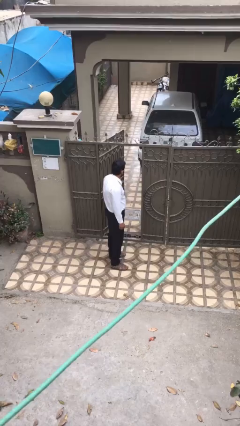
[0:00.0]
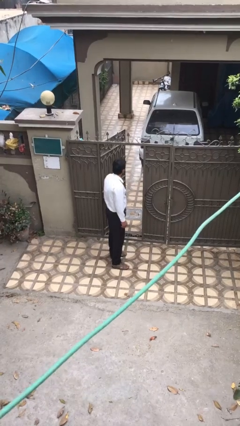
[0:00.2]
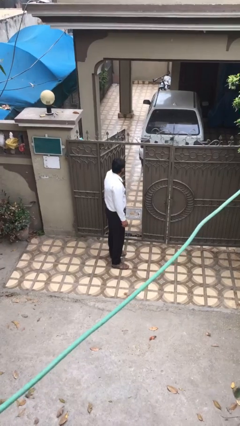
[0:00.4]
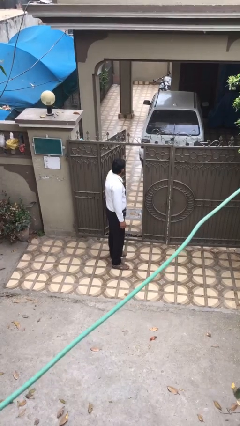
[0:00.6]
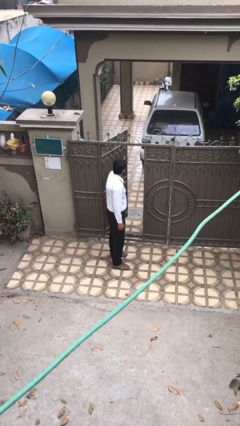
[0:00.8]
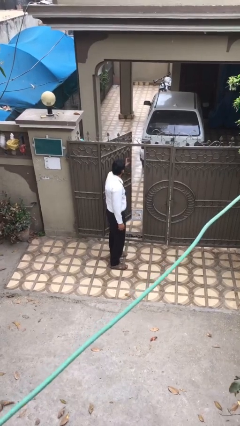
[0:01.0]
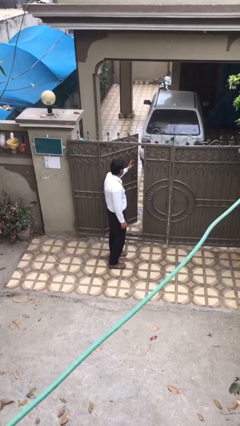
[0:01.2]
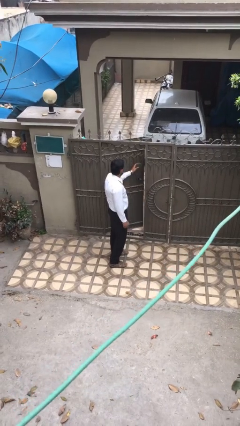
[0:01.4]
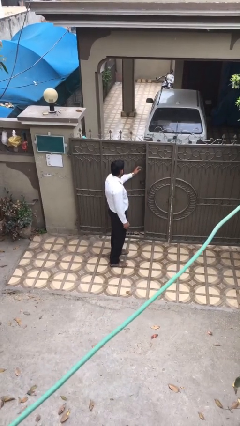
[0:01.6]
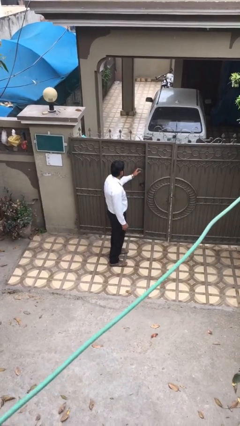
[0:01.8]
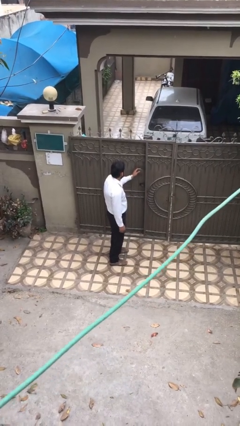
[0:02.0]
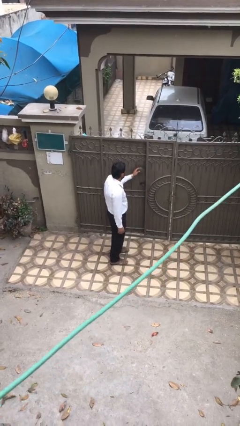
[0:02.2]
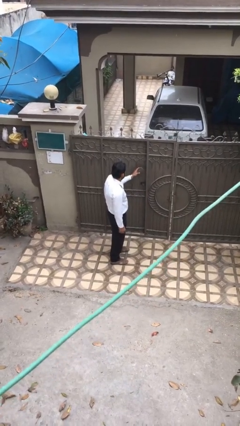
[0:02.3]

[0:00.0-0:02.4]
person closes facility door

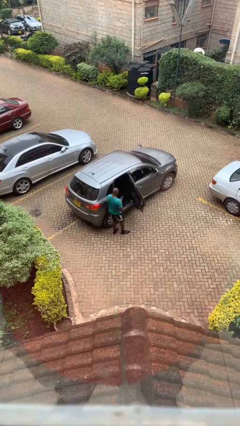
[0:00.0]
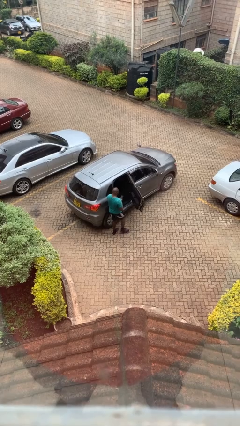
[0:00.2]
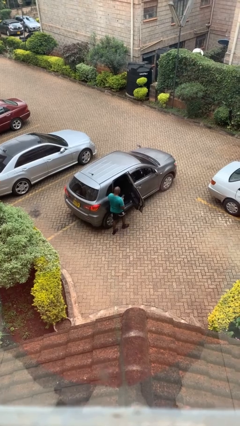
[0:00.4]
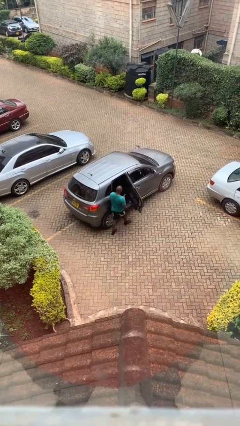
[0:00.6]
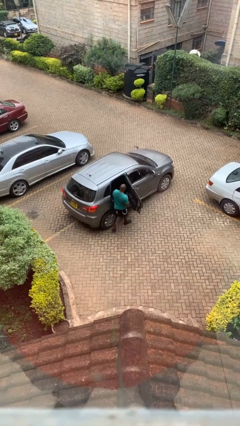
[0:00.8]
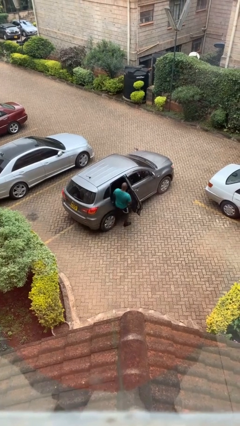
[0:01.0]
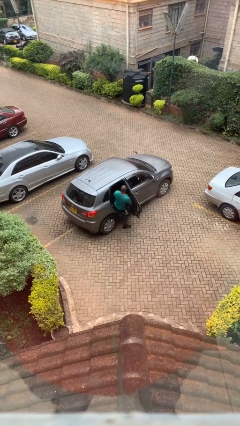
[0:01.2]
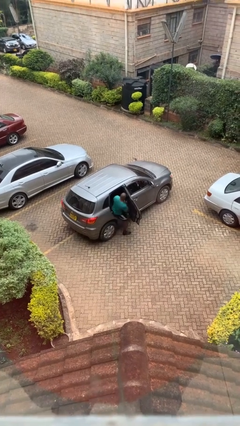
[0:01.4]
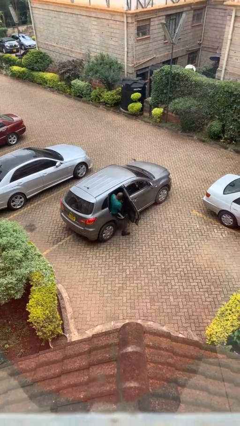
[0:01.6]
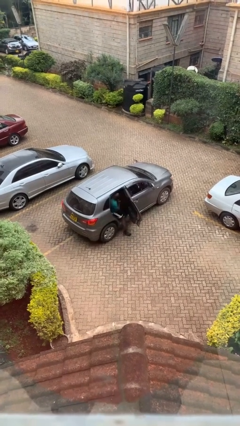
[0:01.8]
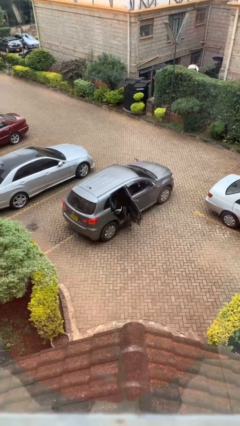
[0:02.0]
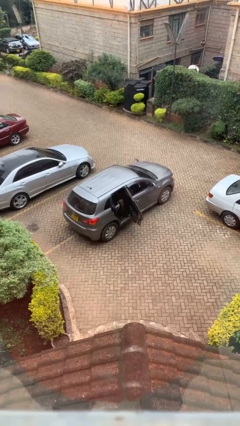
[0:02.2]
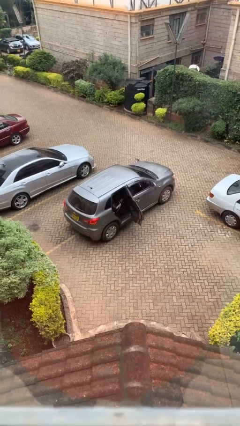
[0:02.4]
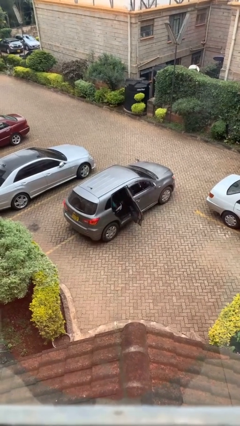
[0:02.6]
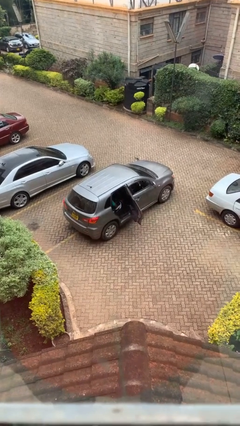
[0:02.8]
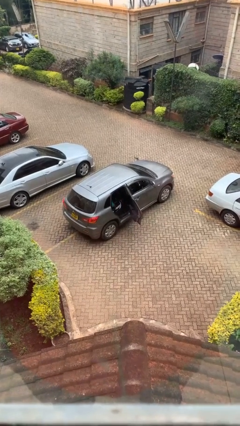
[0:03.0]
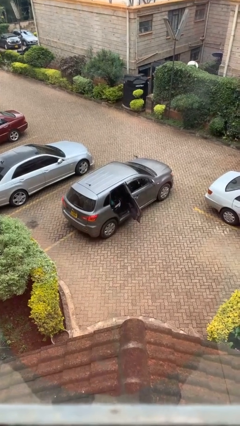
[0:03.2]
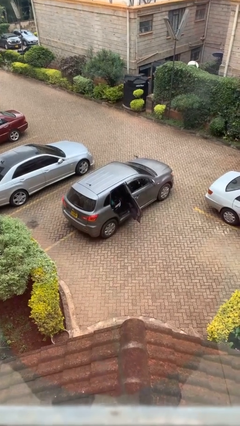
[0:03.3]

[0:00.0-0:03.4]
person enters car

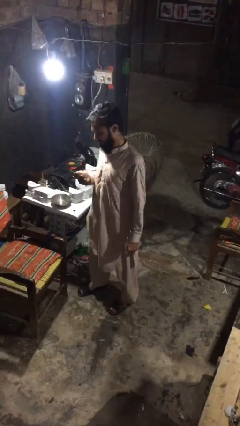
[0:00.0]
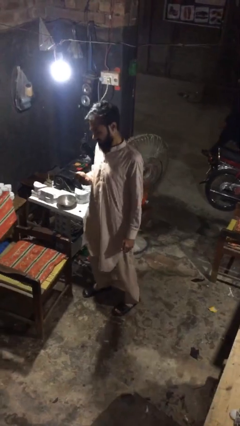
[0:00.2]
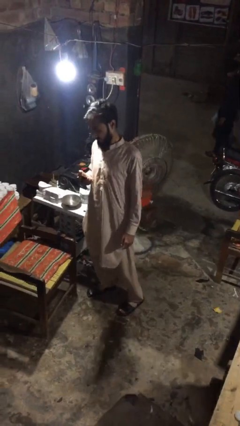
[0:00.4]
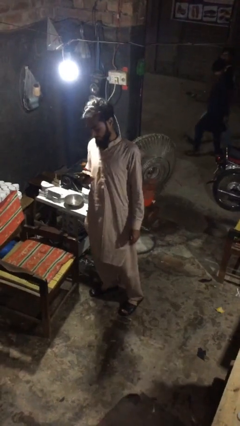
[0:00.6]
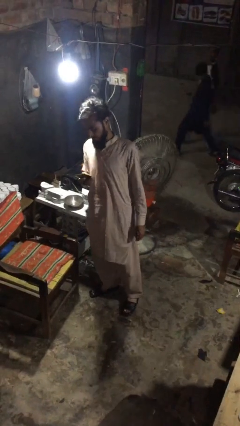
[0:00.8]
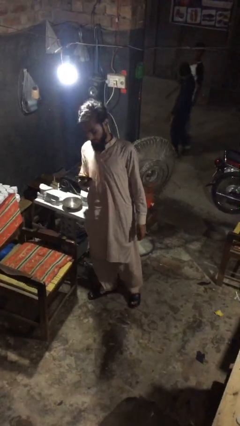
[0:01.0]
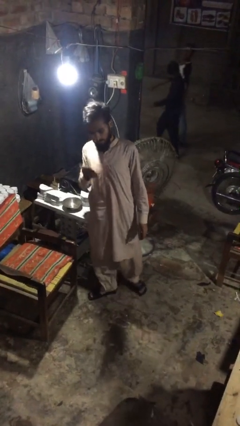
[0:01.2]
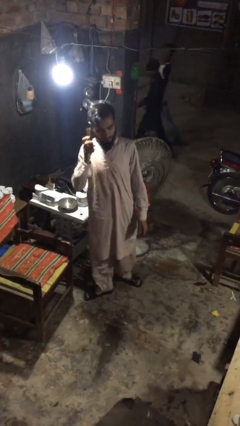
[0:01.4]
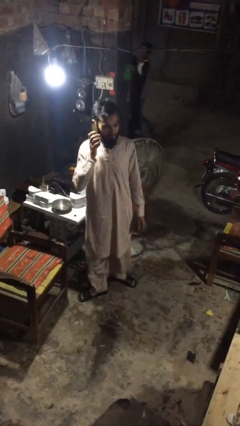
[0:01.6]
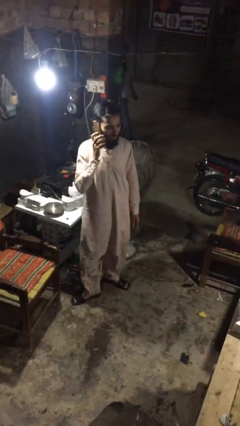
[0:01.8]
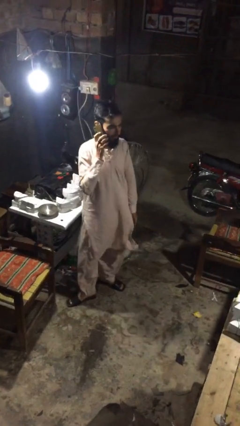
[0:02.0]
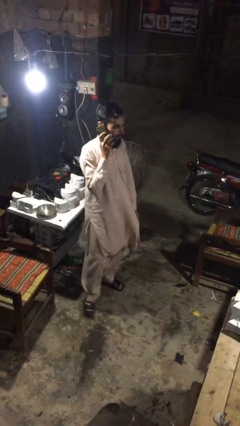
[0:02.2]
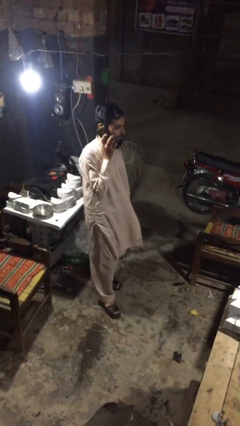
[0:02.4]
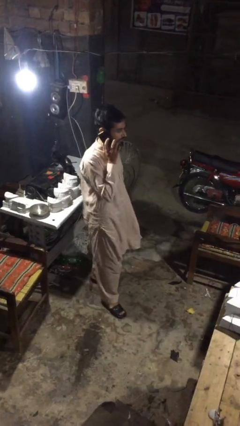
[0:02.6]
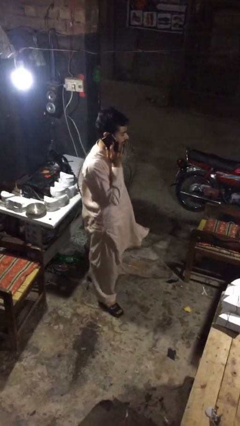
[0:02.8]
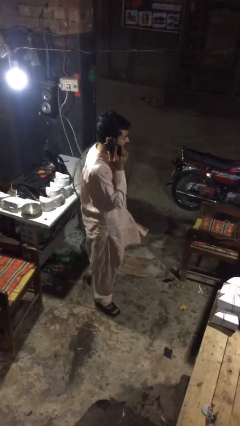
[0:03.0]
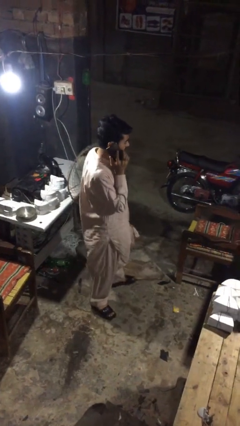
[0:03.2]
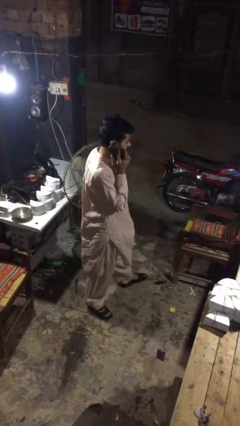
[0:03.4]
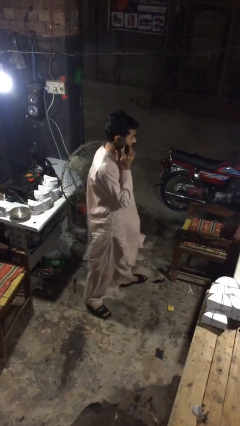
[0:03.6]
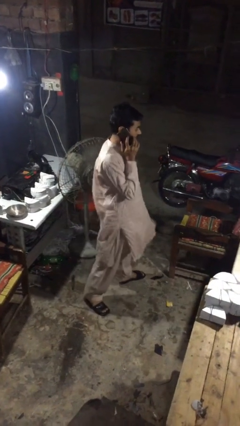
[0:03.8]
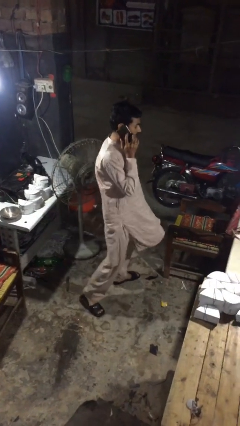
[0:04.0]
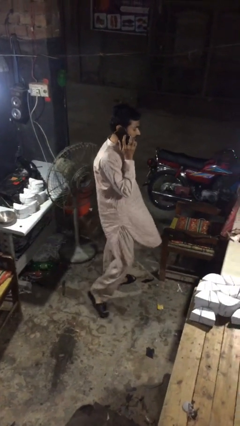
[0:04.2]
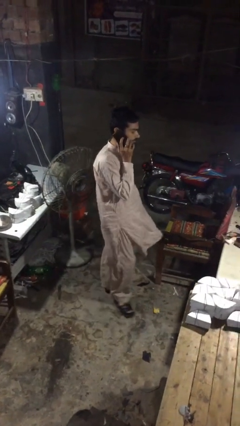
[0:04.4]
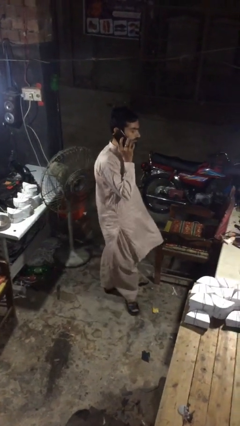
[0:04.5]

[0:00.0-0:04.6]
person talks on phone

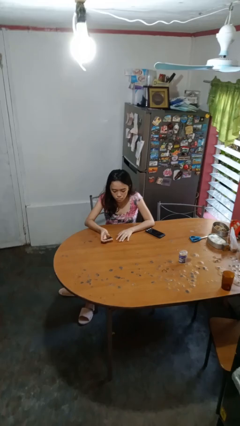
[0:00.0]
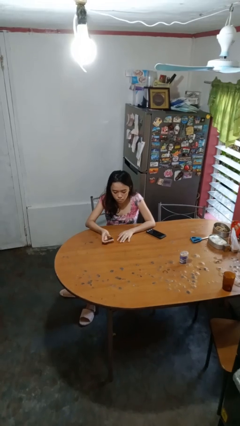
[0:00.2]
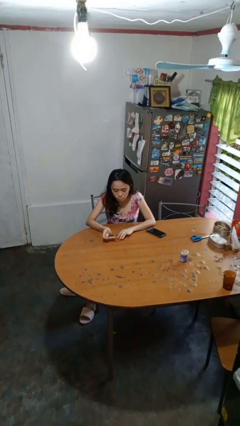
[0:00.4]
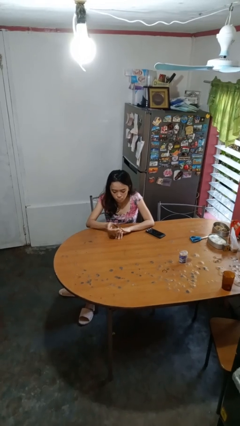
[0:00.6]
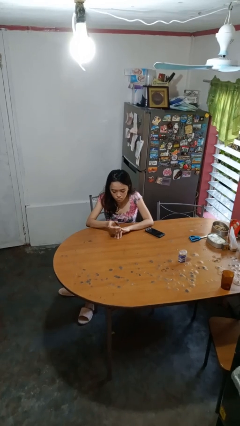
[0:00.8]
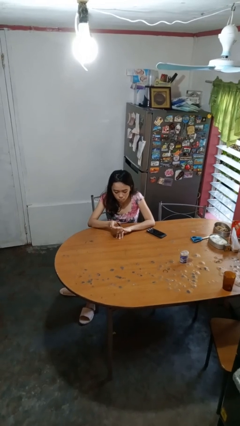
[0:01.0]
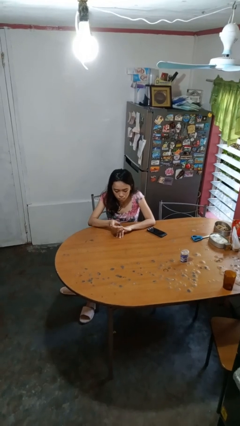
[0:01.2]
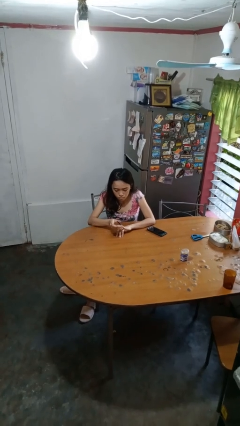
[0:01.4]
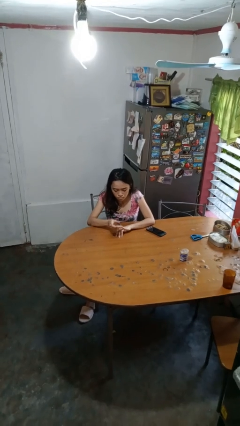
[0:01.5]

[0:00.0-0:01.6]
person clips fingernails

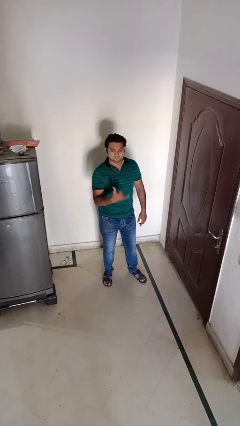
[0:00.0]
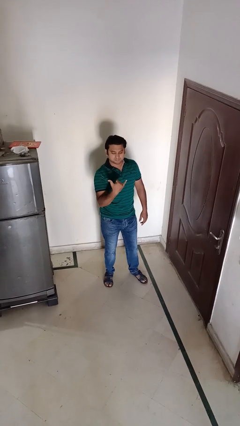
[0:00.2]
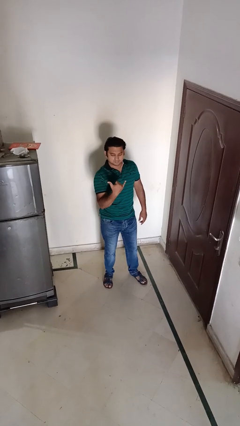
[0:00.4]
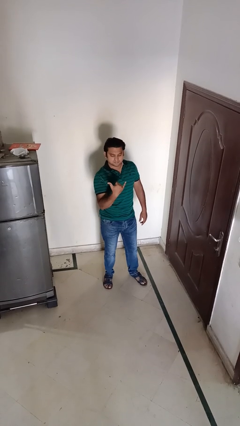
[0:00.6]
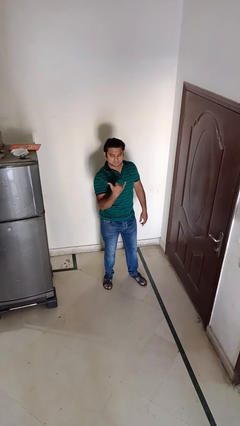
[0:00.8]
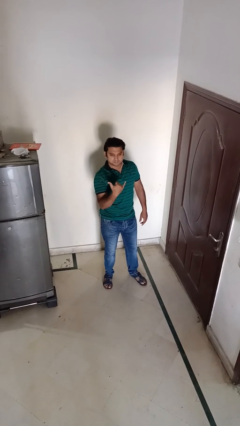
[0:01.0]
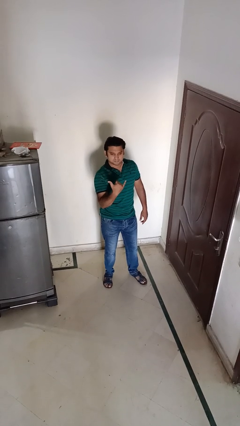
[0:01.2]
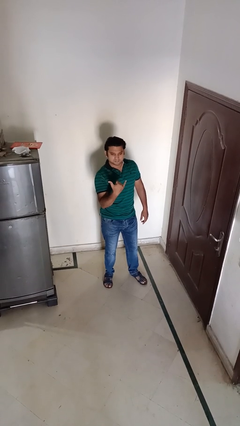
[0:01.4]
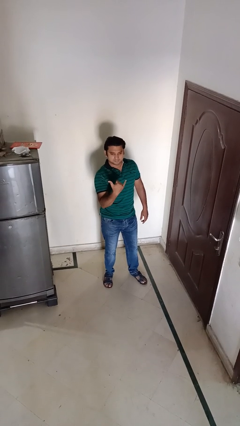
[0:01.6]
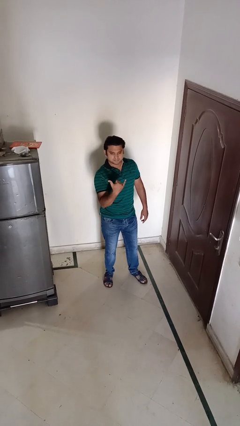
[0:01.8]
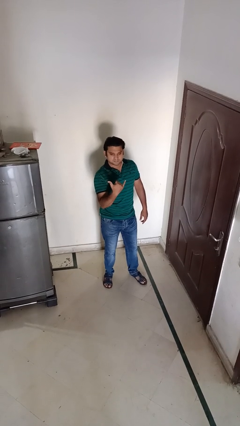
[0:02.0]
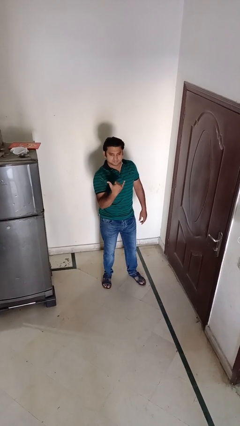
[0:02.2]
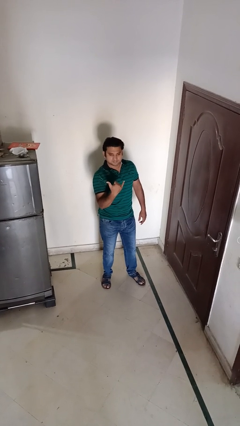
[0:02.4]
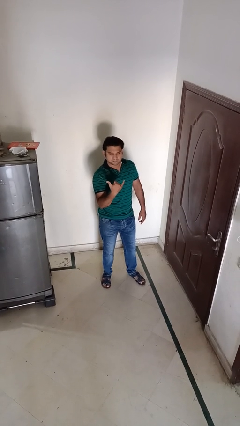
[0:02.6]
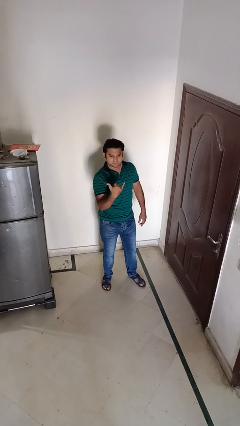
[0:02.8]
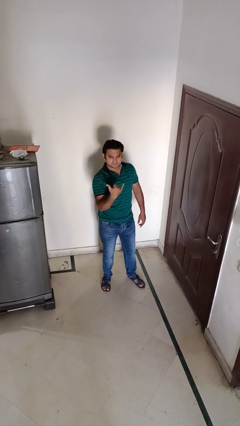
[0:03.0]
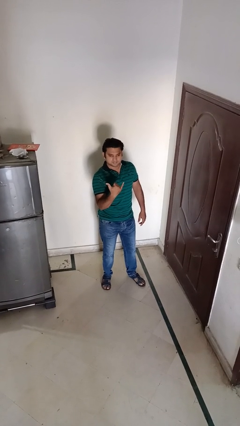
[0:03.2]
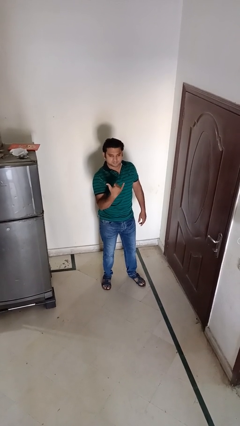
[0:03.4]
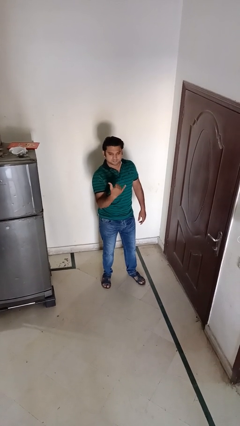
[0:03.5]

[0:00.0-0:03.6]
person gestures hang loose

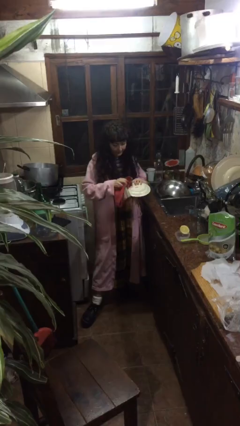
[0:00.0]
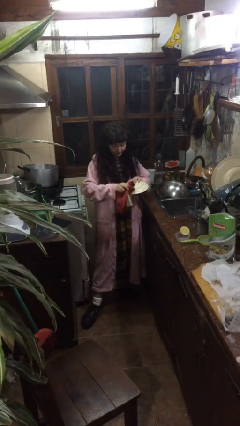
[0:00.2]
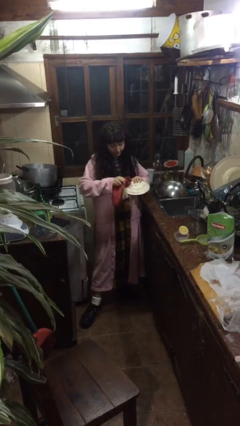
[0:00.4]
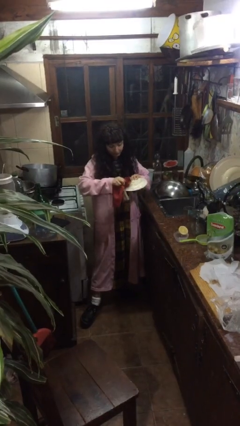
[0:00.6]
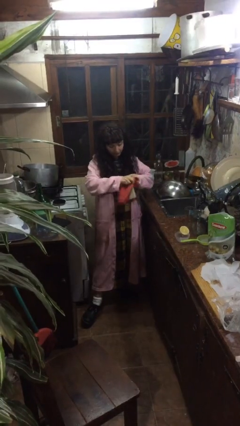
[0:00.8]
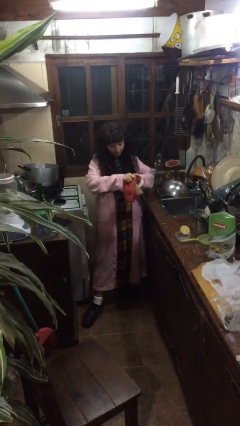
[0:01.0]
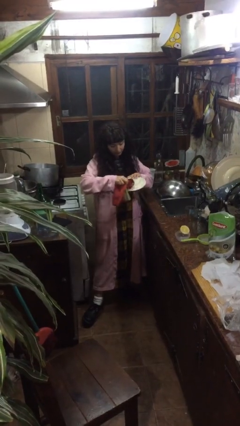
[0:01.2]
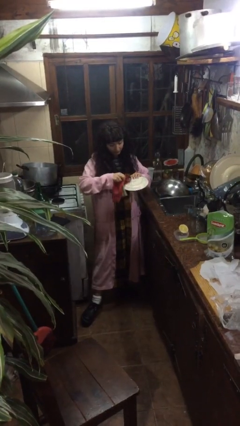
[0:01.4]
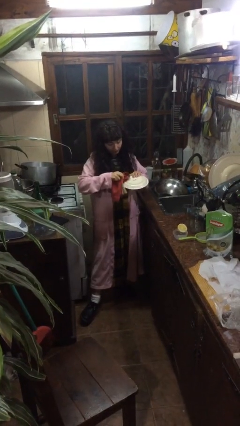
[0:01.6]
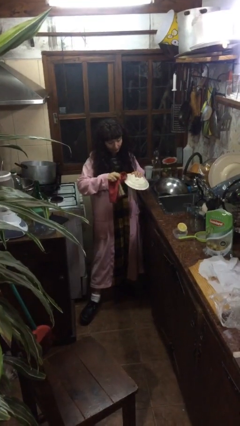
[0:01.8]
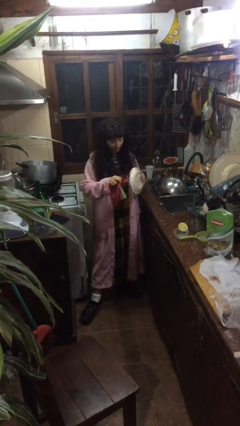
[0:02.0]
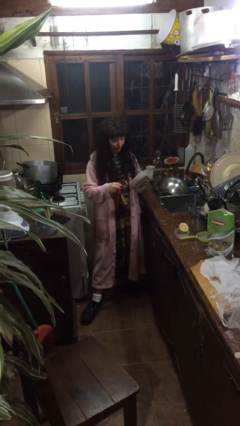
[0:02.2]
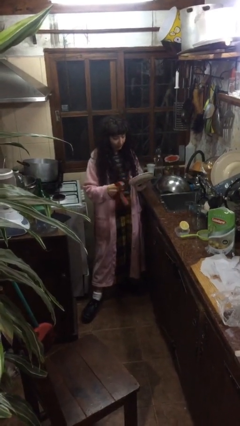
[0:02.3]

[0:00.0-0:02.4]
person dries dish
